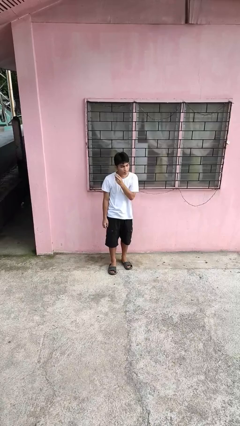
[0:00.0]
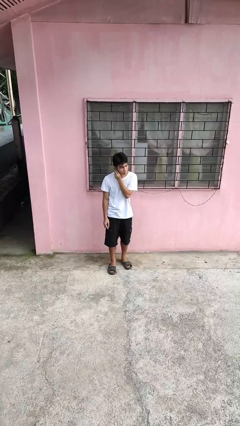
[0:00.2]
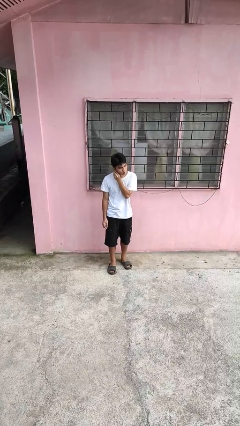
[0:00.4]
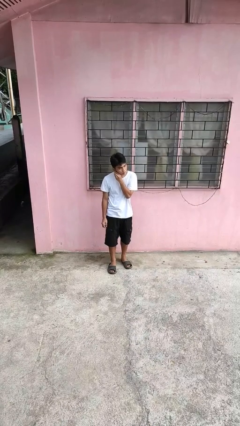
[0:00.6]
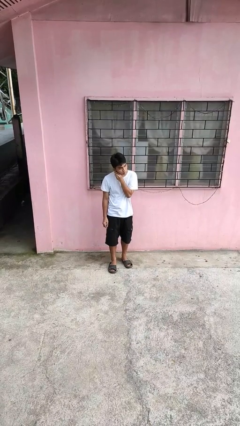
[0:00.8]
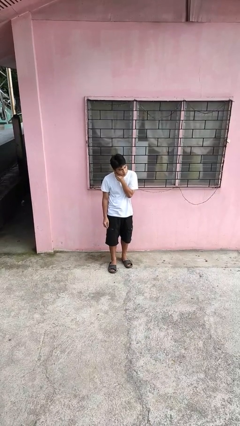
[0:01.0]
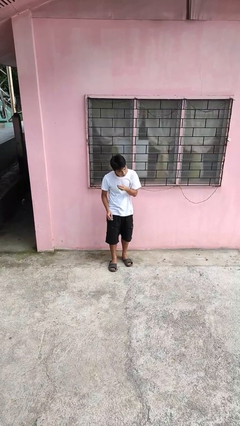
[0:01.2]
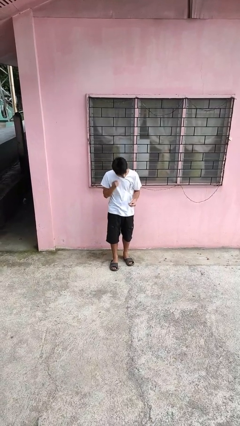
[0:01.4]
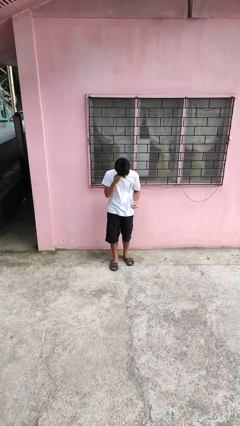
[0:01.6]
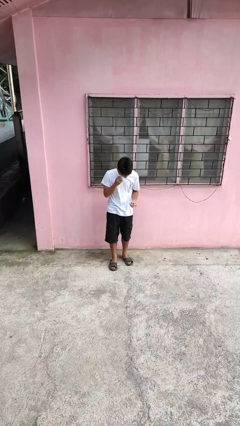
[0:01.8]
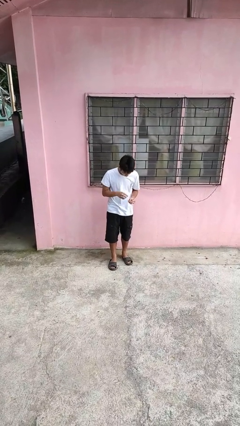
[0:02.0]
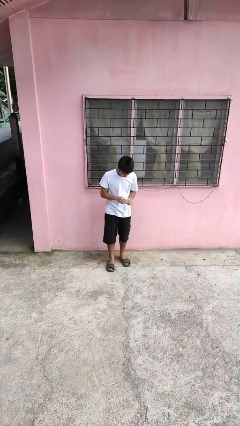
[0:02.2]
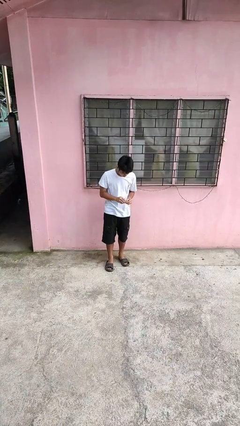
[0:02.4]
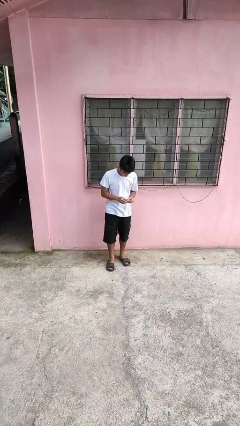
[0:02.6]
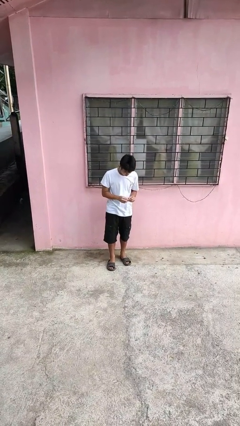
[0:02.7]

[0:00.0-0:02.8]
person takes off earrings

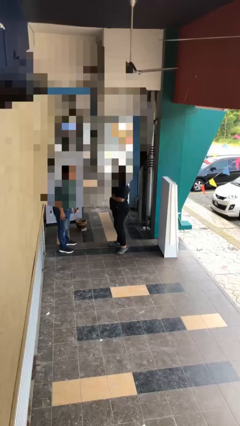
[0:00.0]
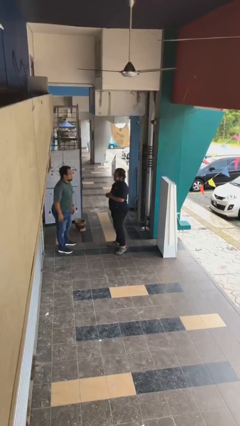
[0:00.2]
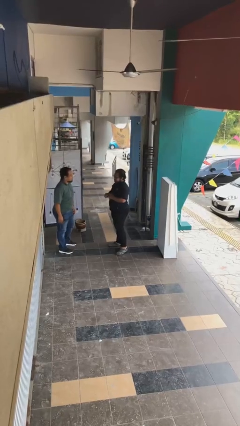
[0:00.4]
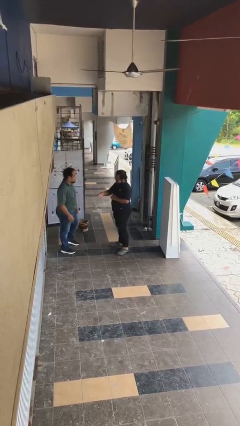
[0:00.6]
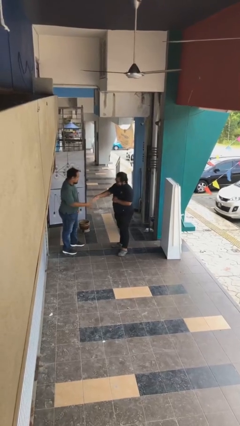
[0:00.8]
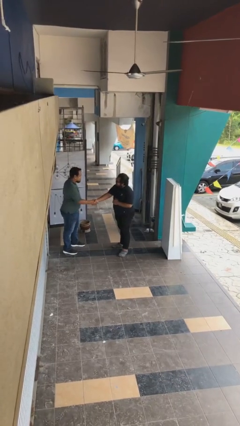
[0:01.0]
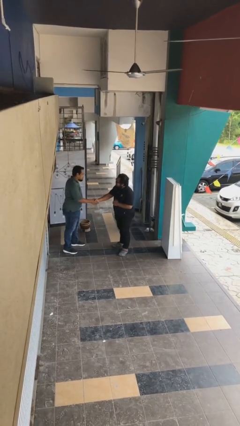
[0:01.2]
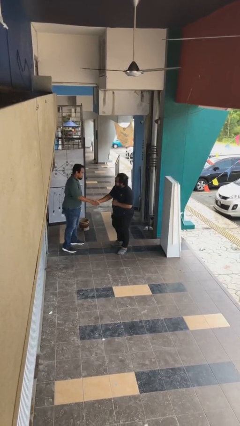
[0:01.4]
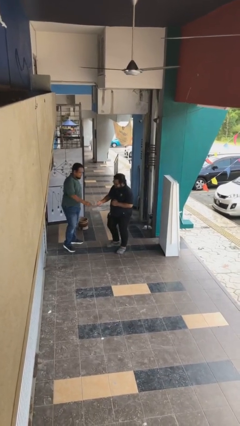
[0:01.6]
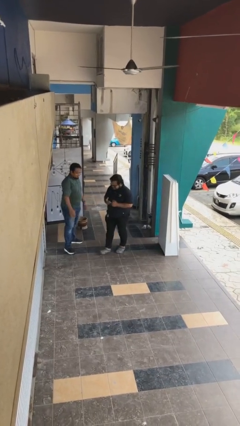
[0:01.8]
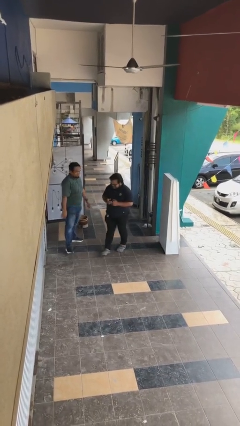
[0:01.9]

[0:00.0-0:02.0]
person shakes hand

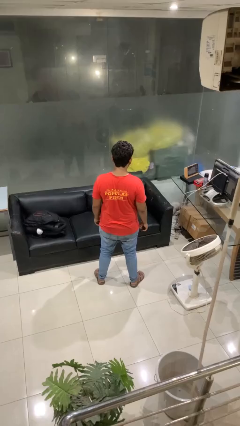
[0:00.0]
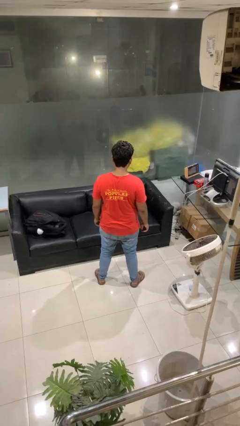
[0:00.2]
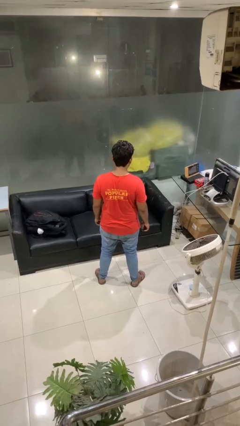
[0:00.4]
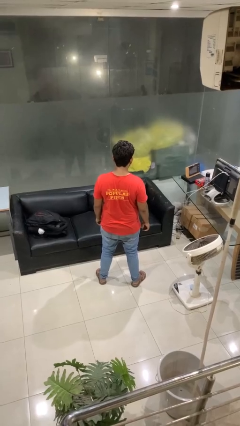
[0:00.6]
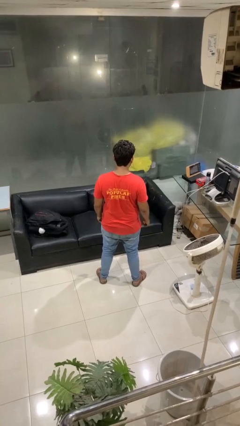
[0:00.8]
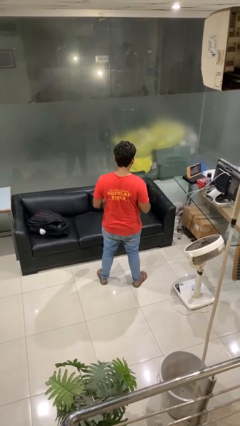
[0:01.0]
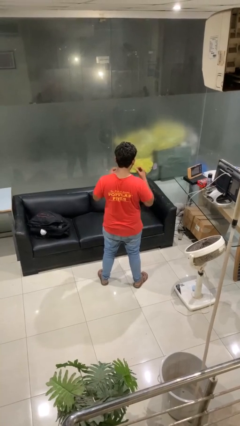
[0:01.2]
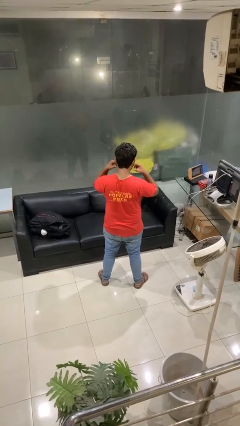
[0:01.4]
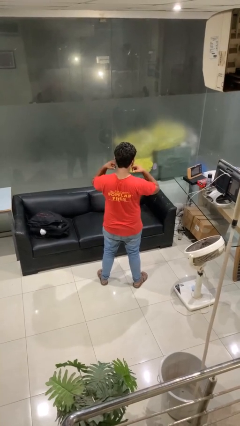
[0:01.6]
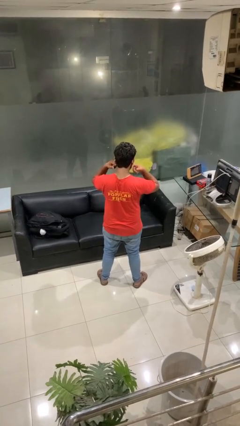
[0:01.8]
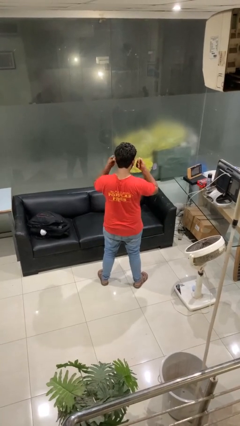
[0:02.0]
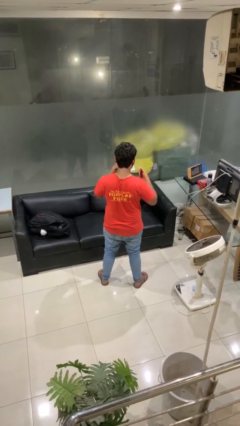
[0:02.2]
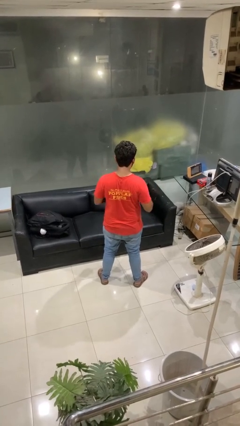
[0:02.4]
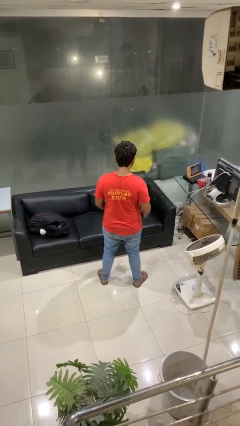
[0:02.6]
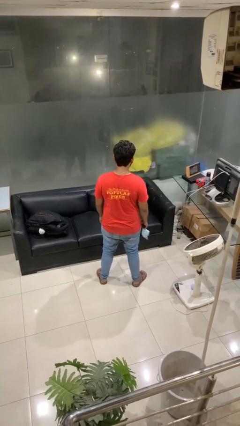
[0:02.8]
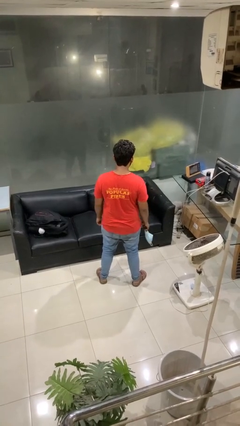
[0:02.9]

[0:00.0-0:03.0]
person takes off facemask

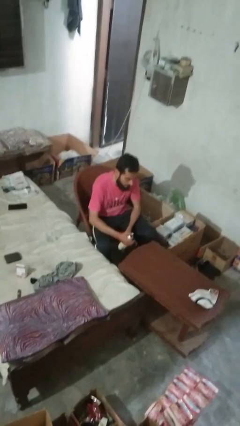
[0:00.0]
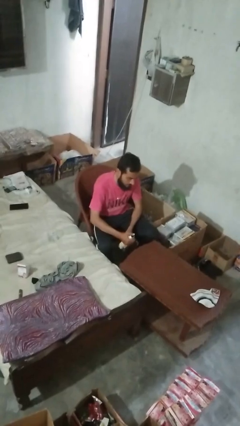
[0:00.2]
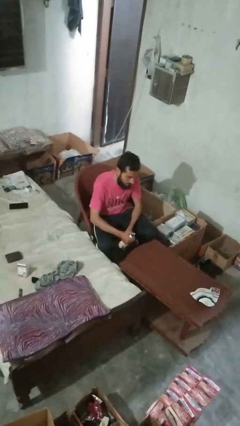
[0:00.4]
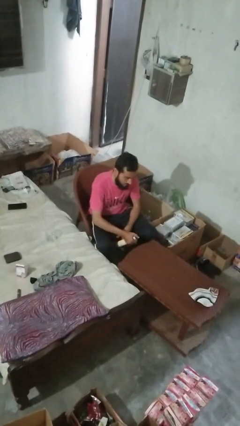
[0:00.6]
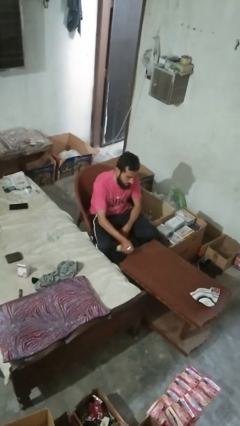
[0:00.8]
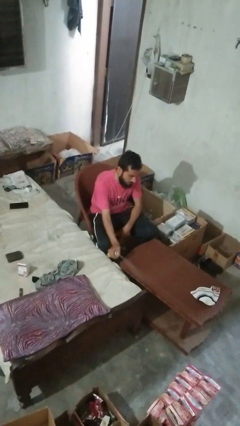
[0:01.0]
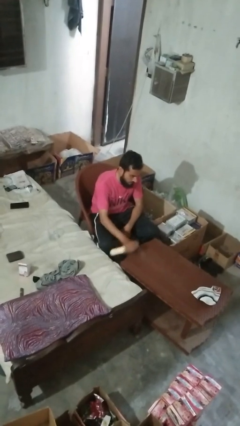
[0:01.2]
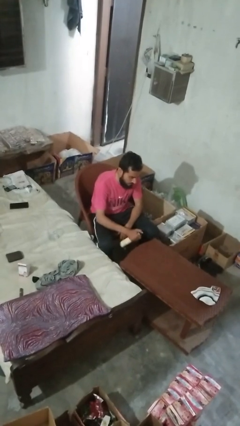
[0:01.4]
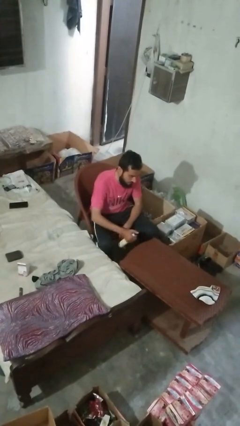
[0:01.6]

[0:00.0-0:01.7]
person sprays from bottle

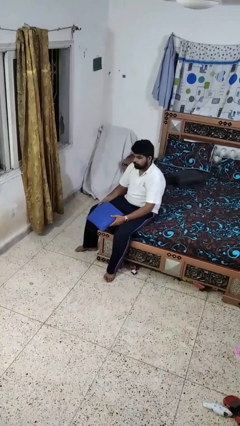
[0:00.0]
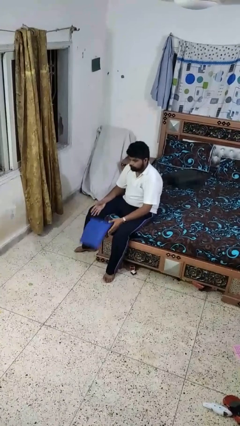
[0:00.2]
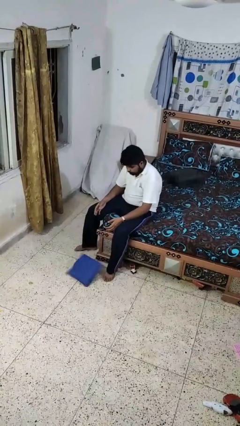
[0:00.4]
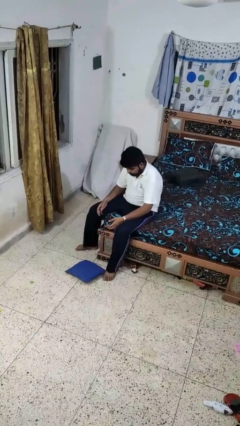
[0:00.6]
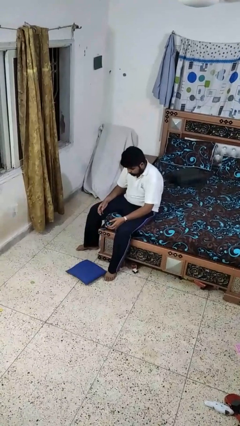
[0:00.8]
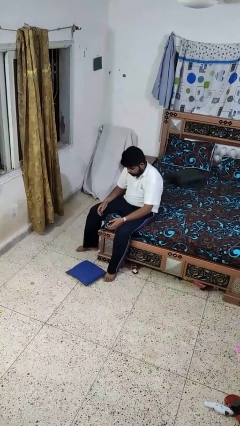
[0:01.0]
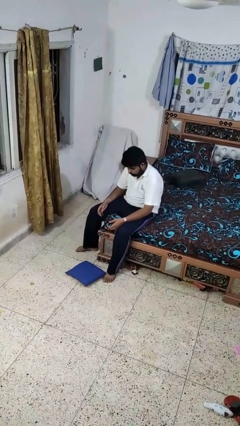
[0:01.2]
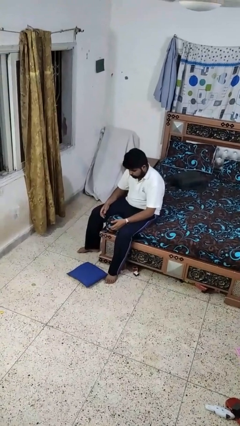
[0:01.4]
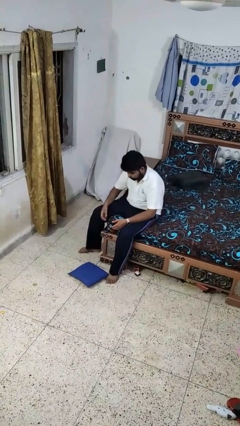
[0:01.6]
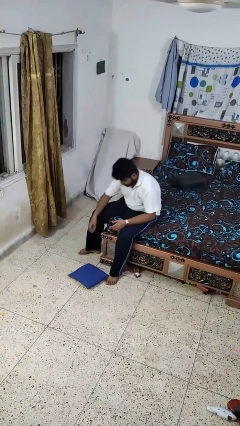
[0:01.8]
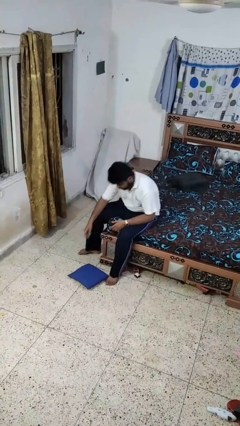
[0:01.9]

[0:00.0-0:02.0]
person drops object

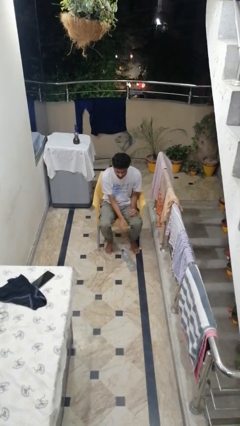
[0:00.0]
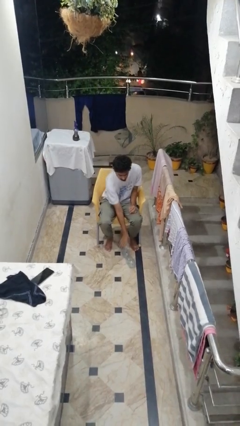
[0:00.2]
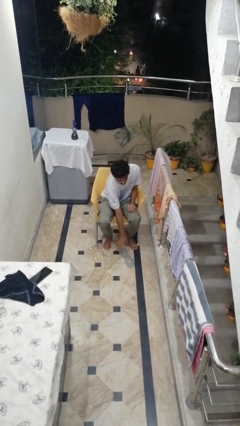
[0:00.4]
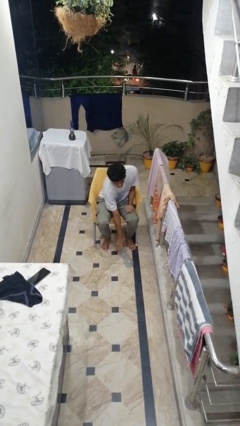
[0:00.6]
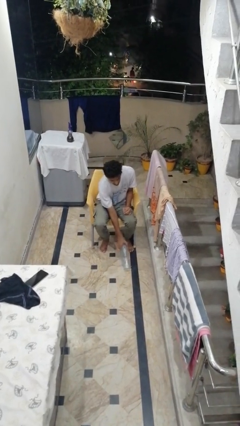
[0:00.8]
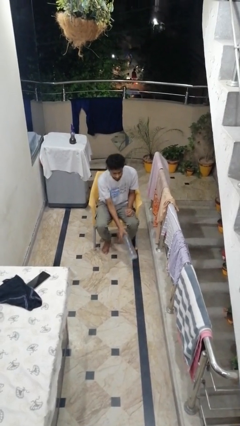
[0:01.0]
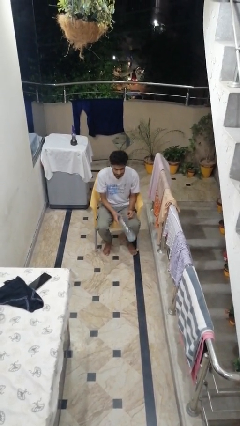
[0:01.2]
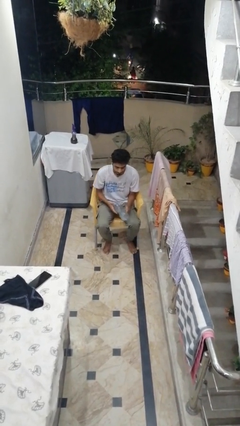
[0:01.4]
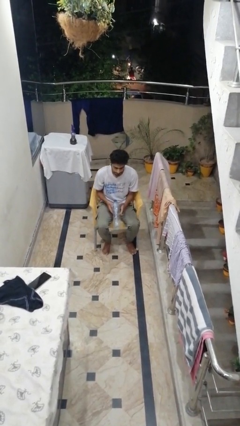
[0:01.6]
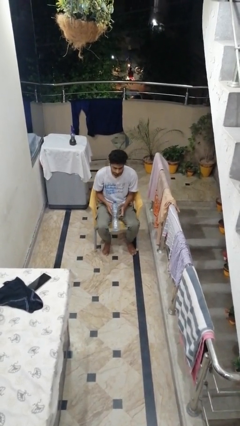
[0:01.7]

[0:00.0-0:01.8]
person picks up object from floor

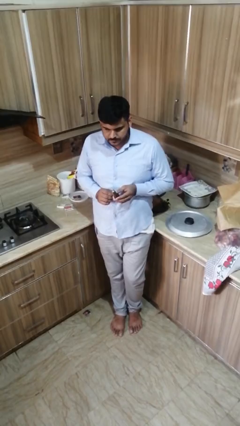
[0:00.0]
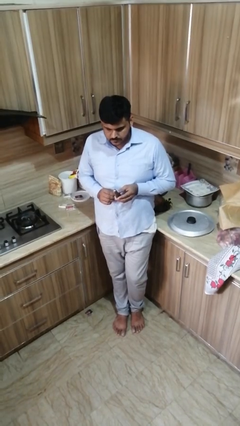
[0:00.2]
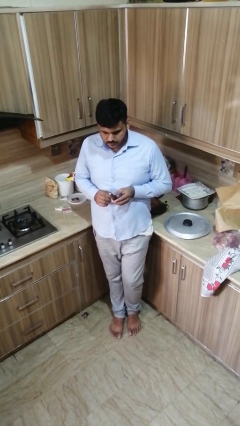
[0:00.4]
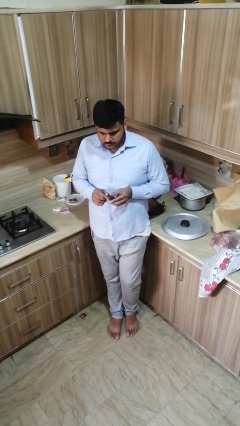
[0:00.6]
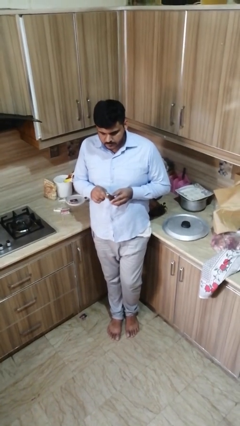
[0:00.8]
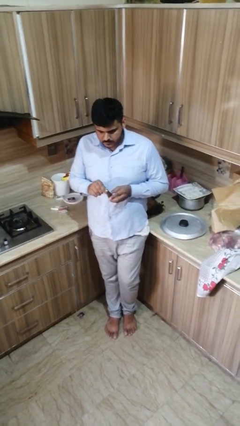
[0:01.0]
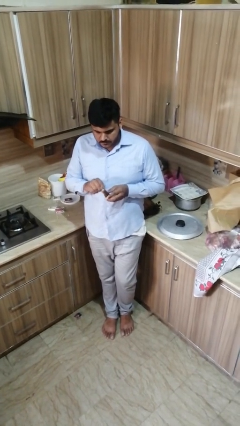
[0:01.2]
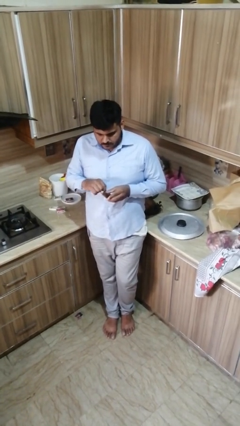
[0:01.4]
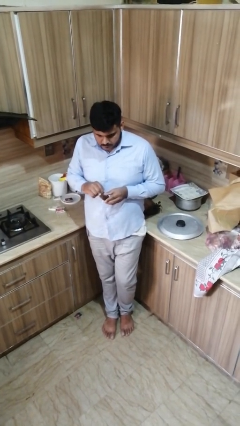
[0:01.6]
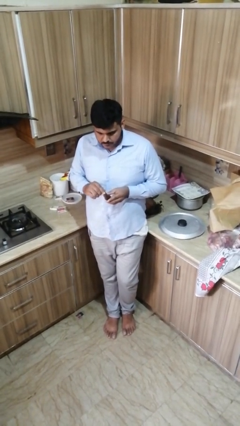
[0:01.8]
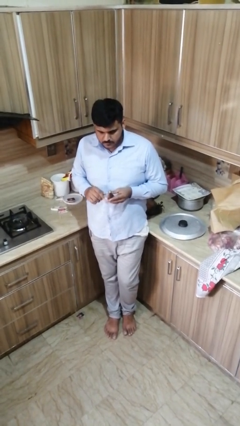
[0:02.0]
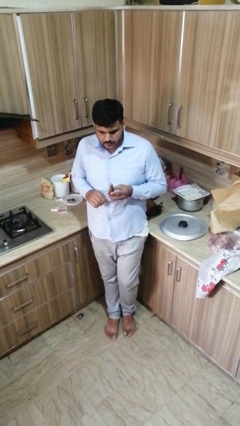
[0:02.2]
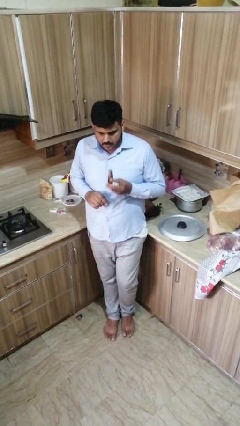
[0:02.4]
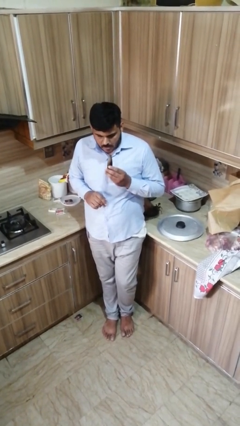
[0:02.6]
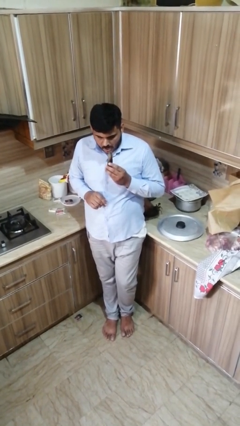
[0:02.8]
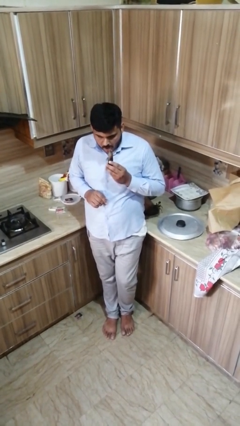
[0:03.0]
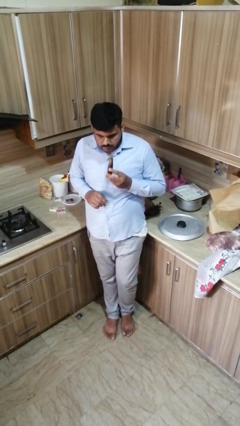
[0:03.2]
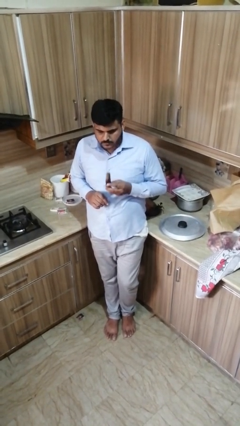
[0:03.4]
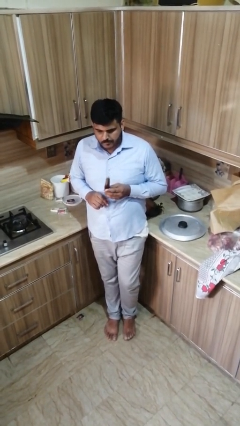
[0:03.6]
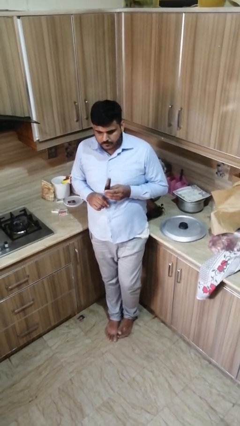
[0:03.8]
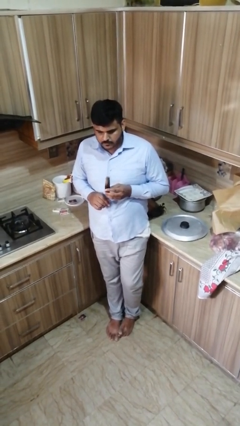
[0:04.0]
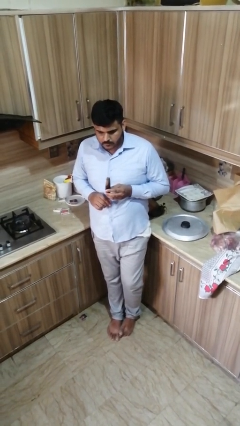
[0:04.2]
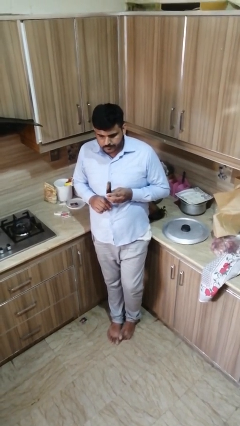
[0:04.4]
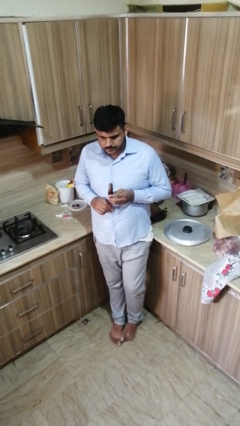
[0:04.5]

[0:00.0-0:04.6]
person eats banana
